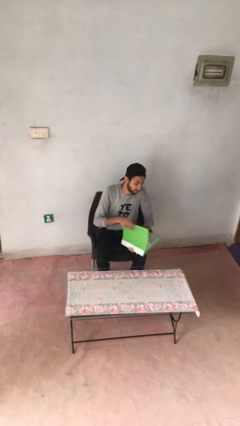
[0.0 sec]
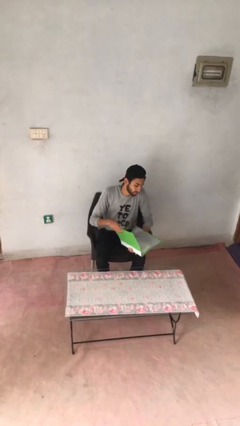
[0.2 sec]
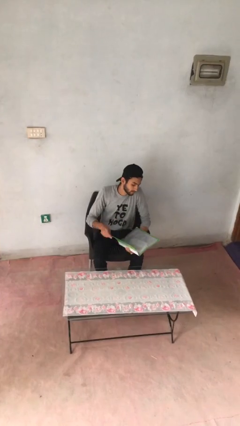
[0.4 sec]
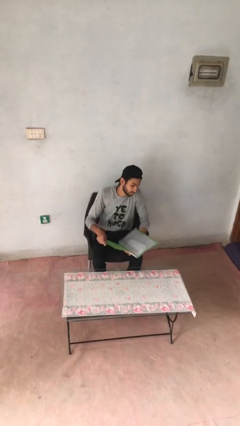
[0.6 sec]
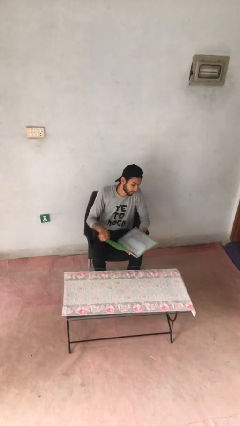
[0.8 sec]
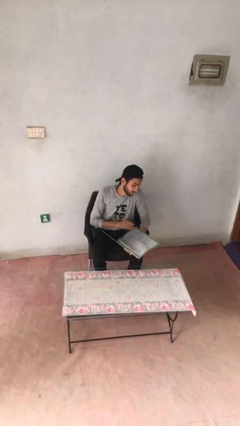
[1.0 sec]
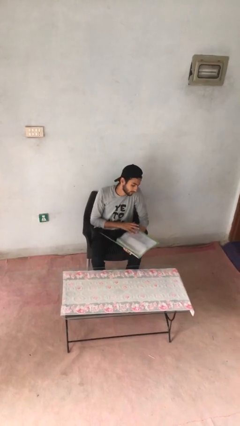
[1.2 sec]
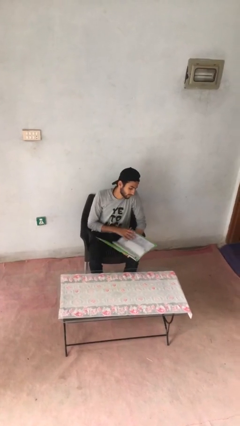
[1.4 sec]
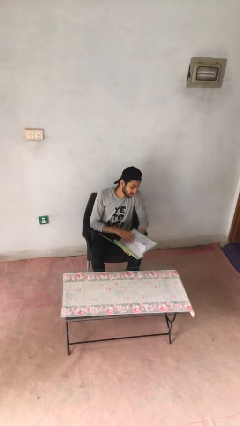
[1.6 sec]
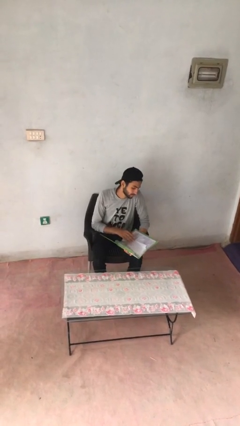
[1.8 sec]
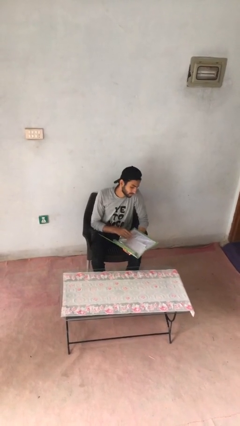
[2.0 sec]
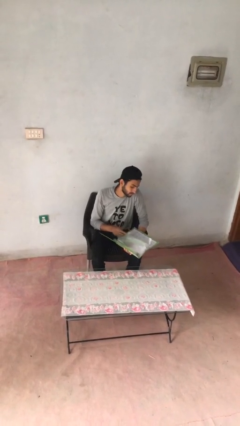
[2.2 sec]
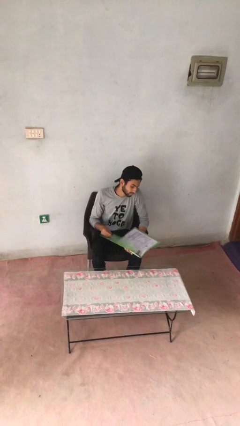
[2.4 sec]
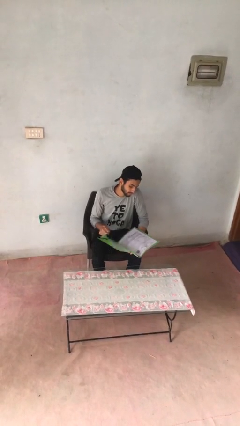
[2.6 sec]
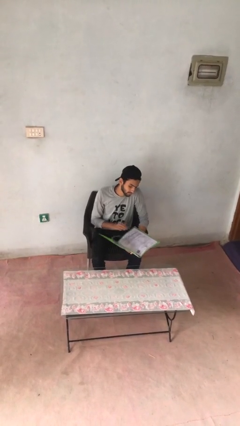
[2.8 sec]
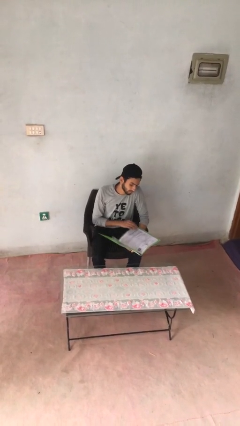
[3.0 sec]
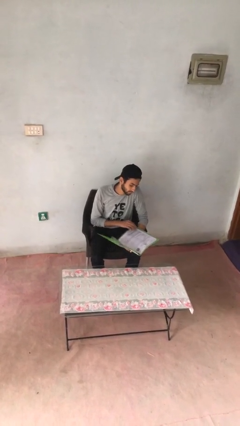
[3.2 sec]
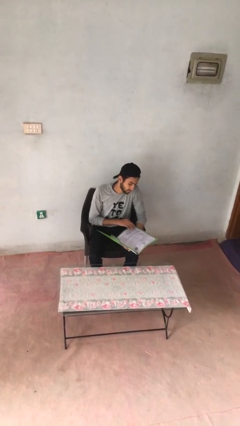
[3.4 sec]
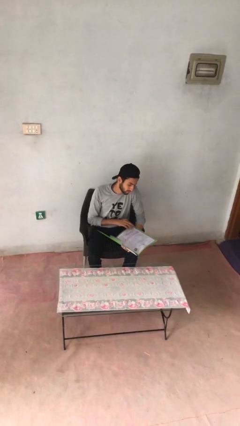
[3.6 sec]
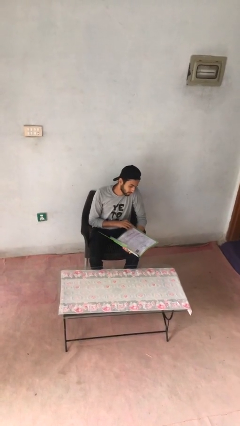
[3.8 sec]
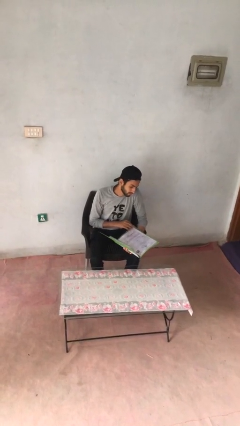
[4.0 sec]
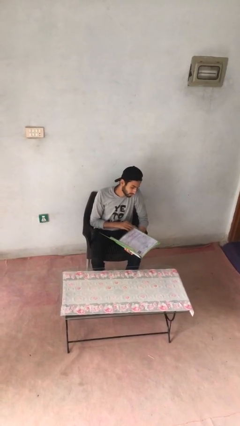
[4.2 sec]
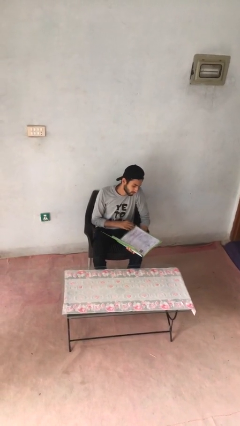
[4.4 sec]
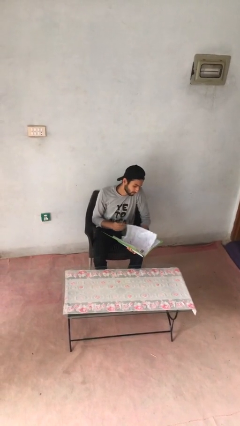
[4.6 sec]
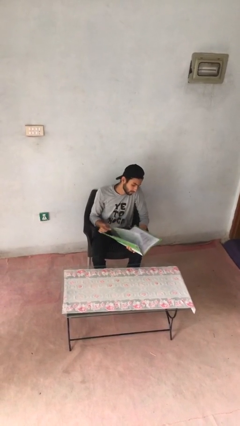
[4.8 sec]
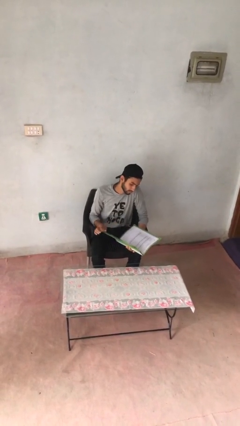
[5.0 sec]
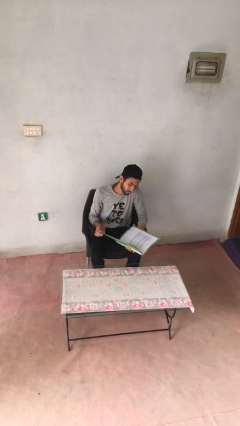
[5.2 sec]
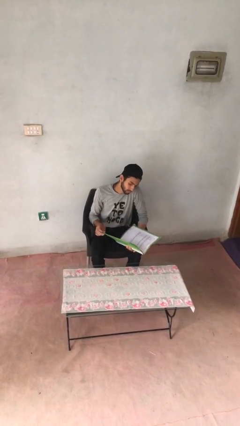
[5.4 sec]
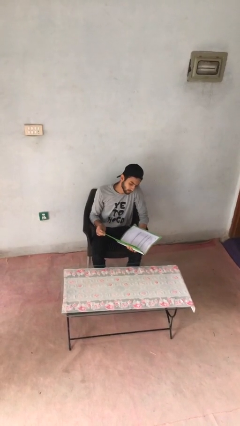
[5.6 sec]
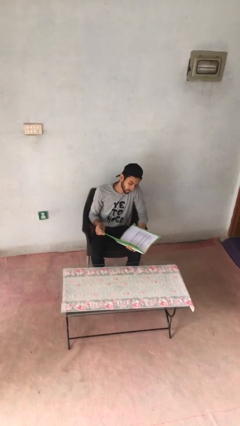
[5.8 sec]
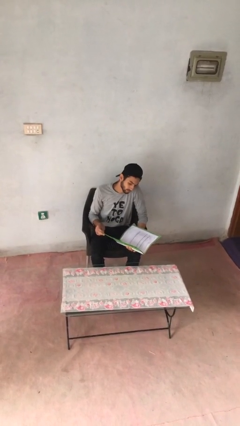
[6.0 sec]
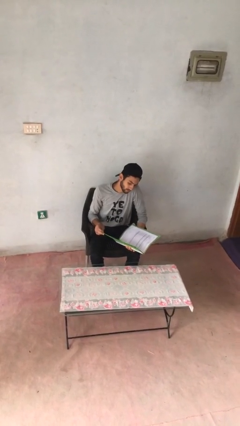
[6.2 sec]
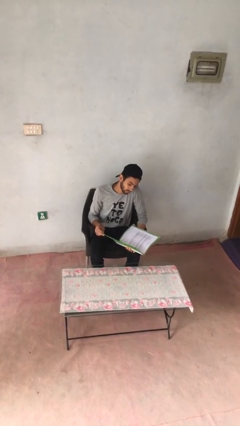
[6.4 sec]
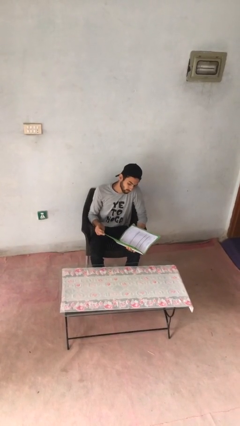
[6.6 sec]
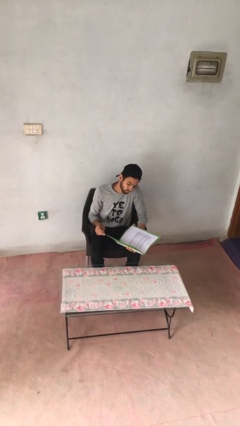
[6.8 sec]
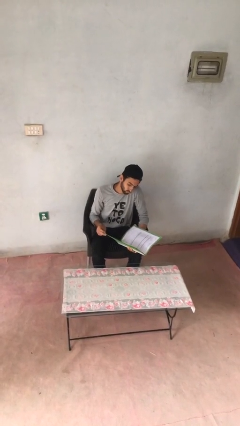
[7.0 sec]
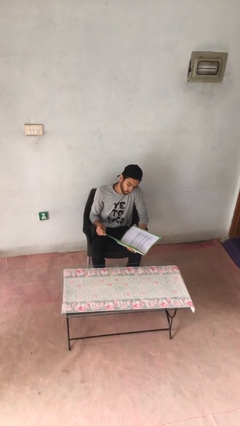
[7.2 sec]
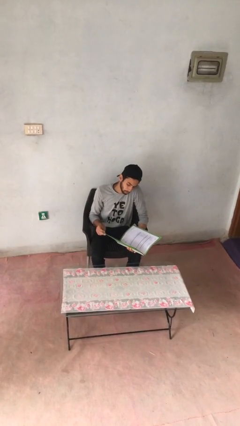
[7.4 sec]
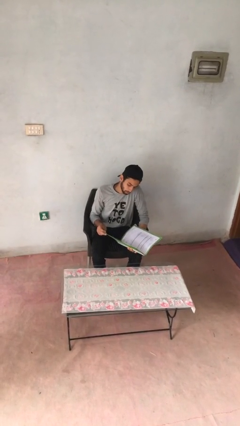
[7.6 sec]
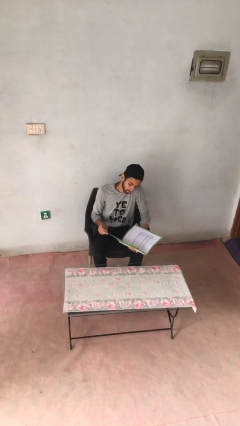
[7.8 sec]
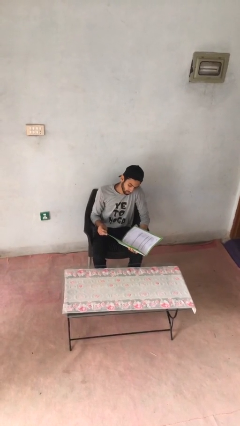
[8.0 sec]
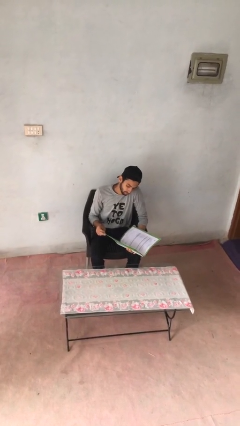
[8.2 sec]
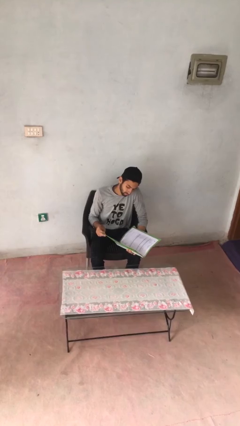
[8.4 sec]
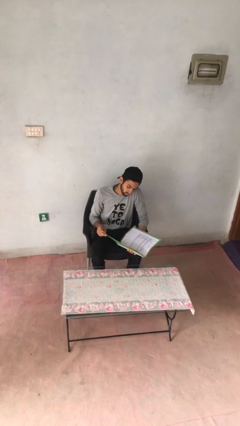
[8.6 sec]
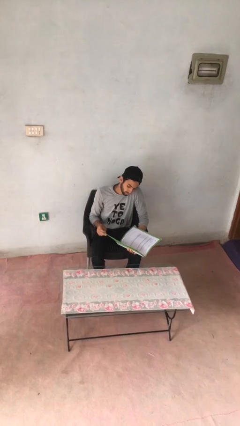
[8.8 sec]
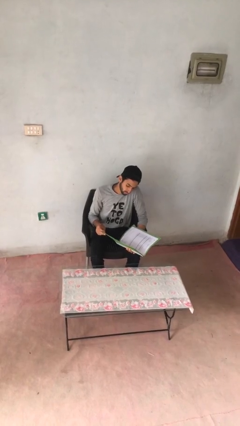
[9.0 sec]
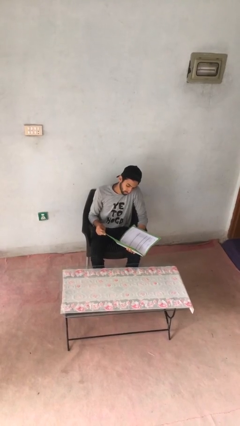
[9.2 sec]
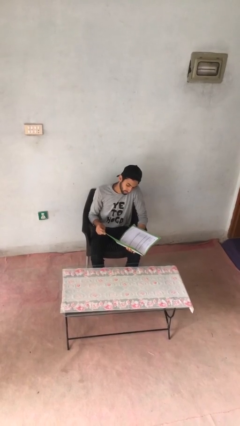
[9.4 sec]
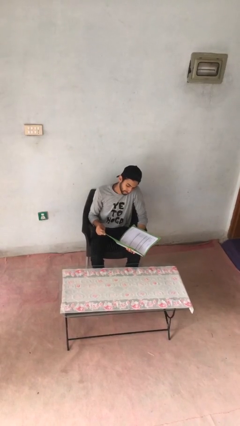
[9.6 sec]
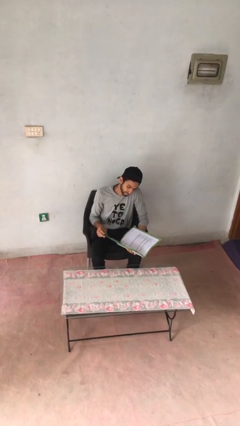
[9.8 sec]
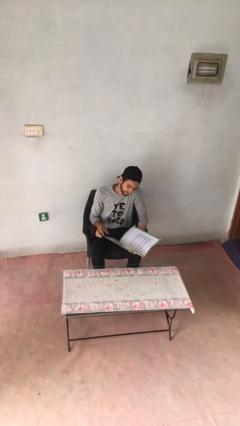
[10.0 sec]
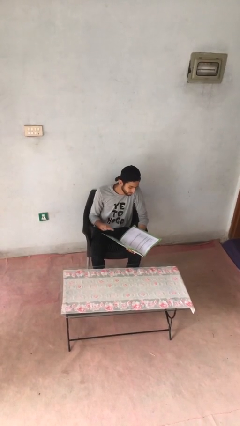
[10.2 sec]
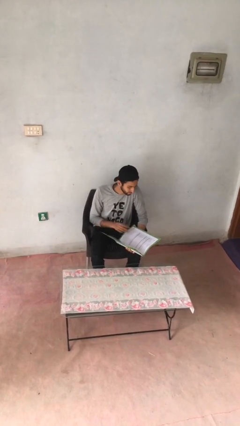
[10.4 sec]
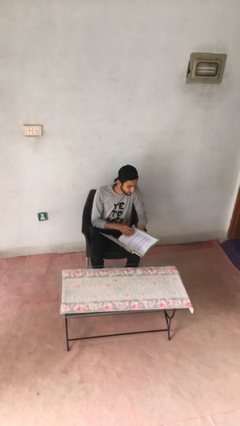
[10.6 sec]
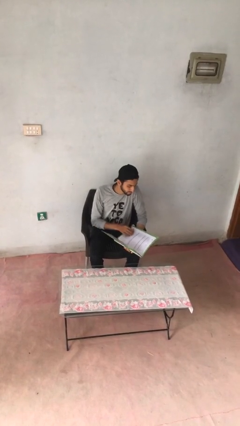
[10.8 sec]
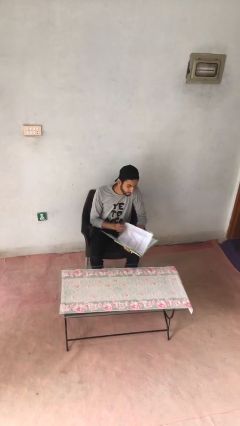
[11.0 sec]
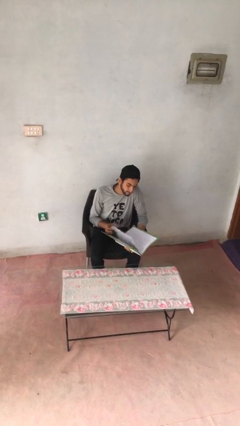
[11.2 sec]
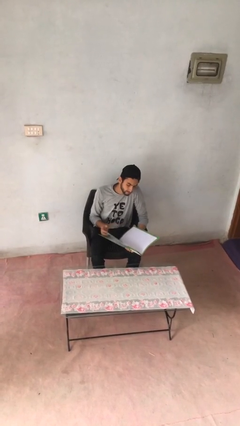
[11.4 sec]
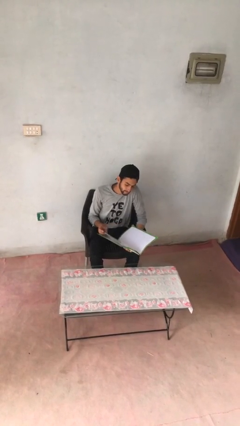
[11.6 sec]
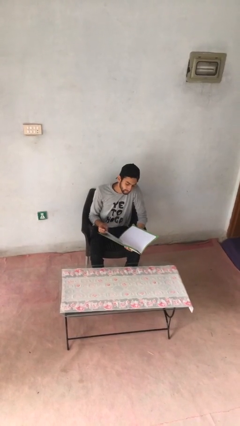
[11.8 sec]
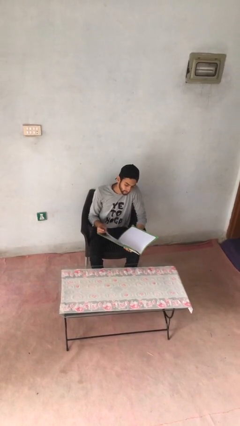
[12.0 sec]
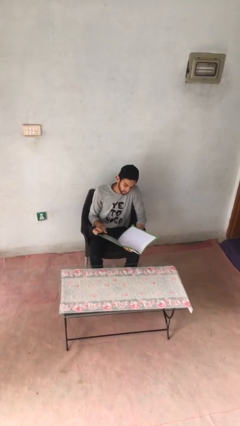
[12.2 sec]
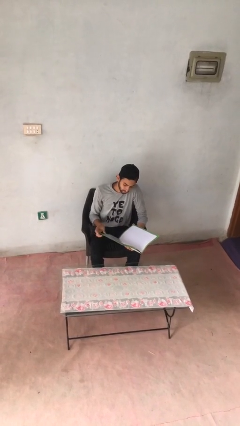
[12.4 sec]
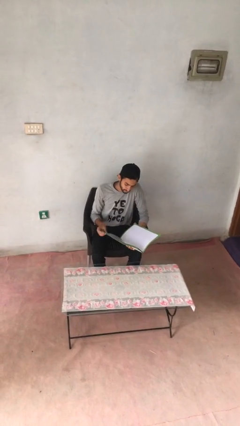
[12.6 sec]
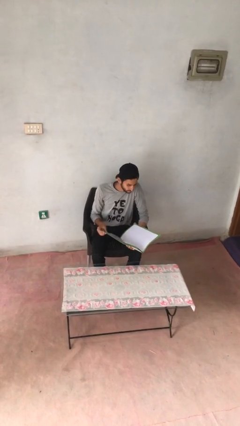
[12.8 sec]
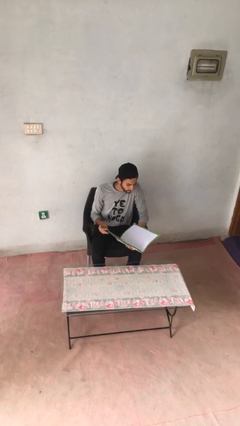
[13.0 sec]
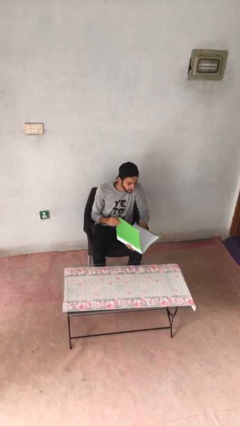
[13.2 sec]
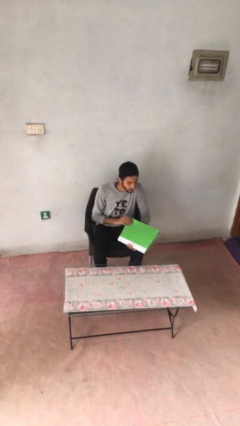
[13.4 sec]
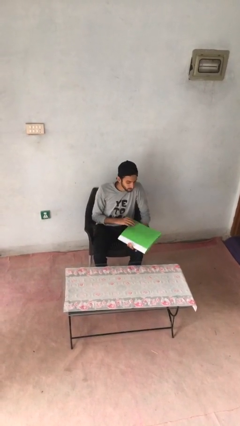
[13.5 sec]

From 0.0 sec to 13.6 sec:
person reads document

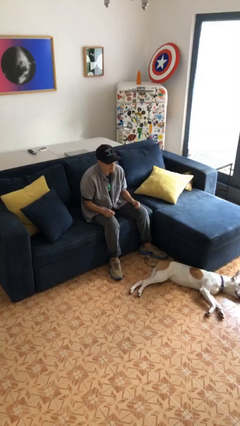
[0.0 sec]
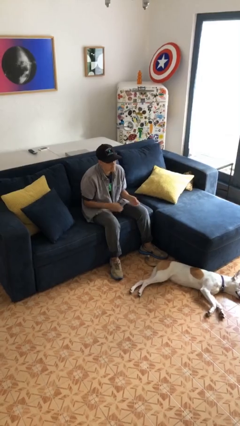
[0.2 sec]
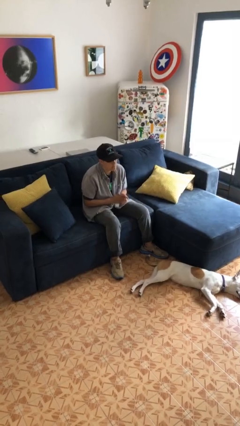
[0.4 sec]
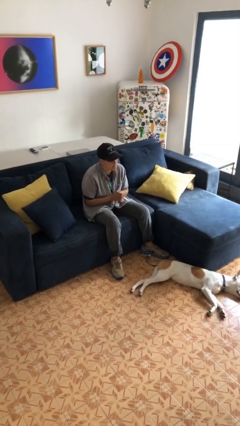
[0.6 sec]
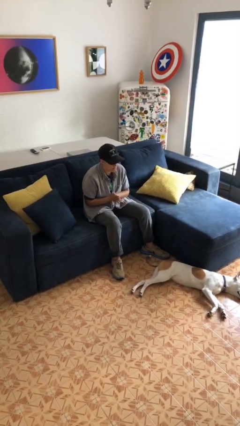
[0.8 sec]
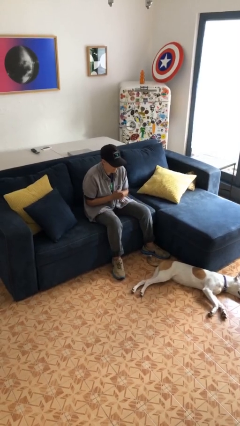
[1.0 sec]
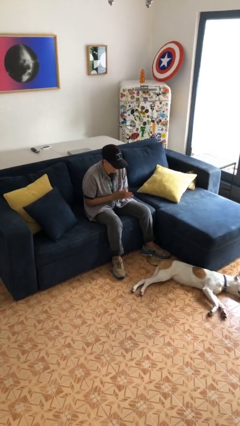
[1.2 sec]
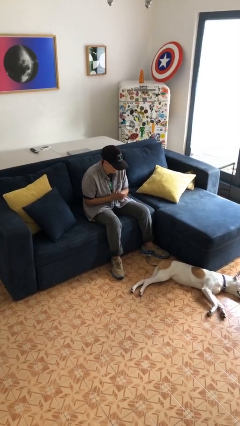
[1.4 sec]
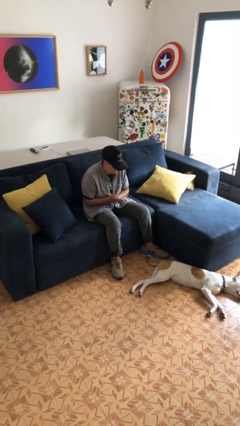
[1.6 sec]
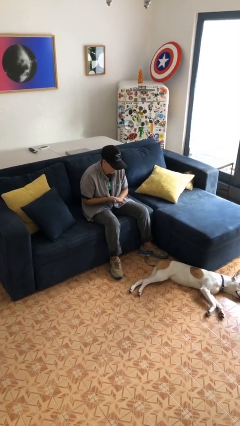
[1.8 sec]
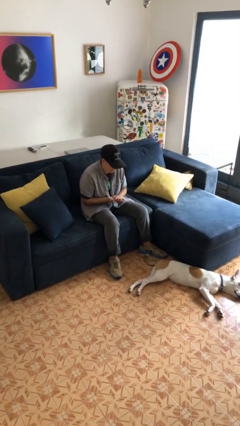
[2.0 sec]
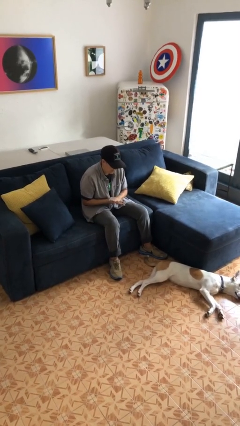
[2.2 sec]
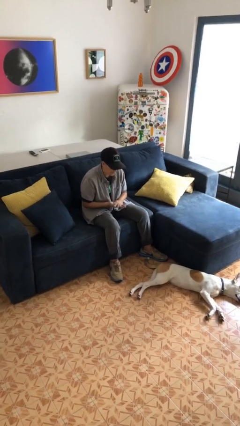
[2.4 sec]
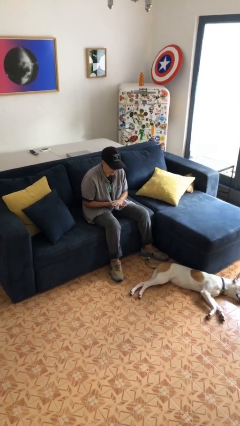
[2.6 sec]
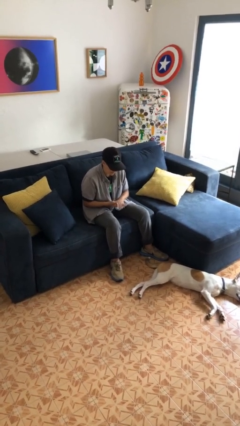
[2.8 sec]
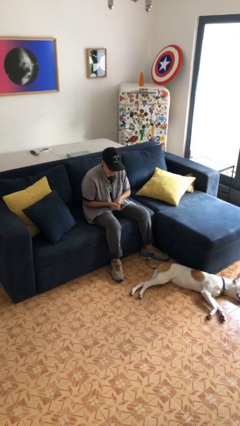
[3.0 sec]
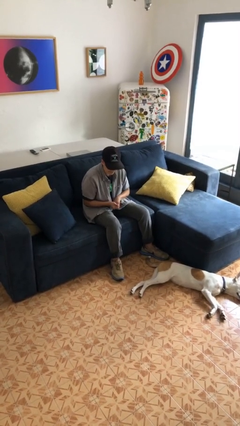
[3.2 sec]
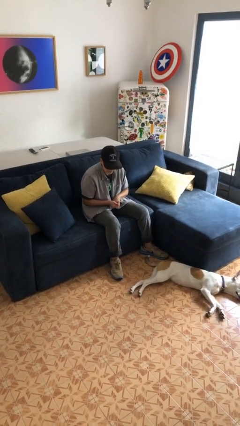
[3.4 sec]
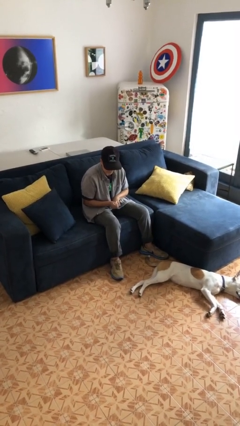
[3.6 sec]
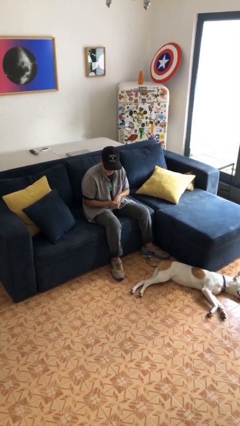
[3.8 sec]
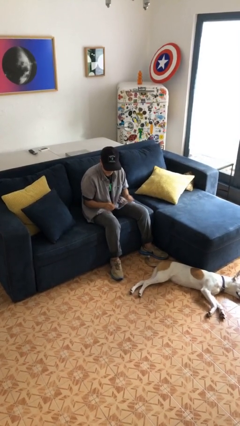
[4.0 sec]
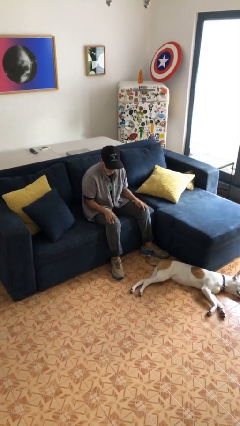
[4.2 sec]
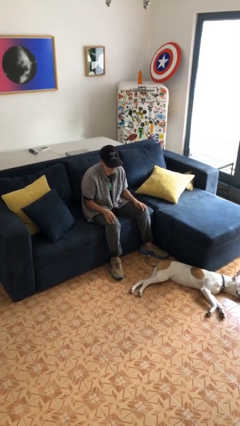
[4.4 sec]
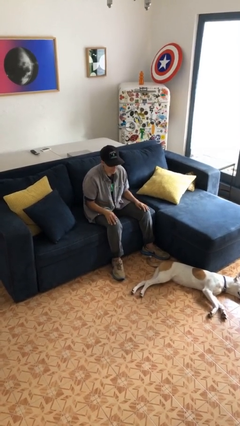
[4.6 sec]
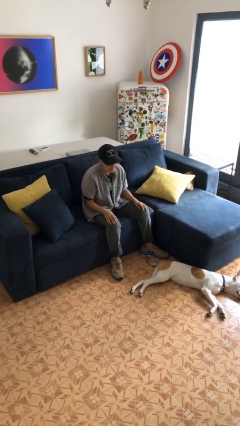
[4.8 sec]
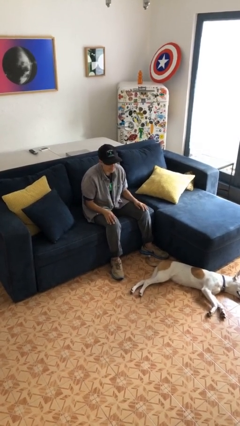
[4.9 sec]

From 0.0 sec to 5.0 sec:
person looks at hands in lap
